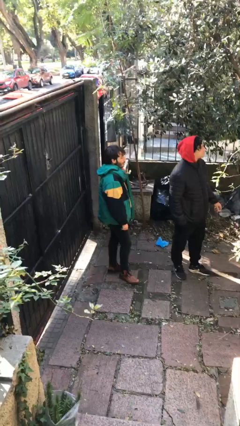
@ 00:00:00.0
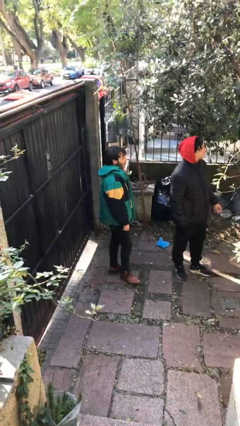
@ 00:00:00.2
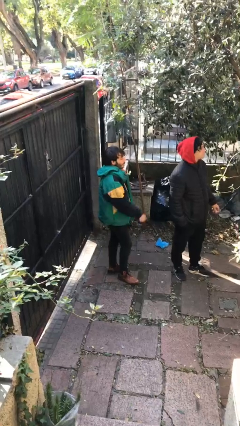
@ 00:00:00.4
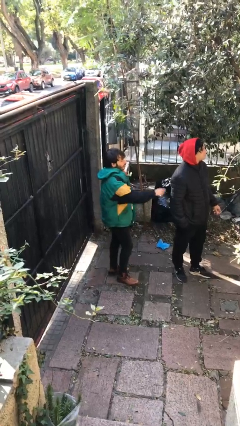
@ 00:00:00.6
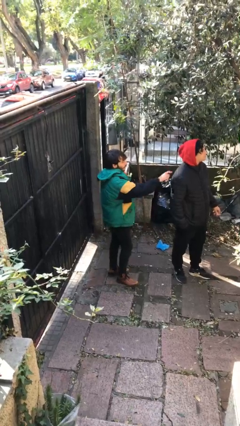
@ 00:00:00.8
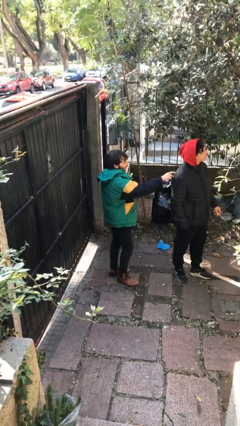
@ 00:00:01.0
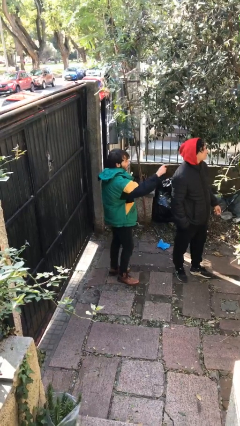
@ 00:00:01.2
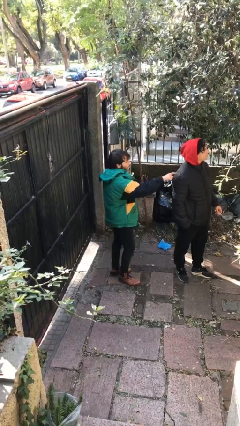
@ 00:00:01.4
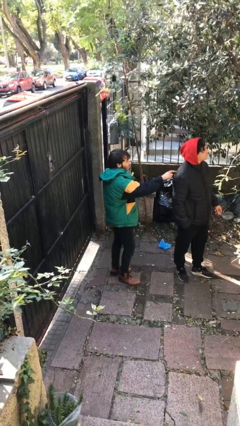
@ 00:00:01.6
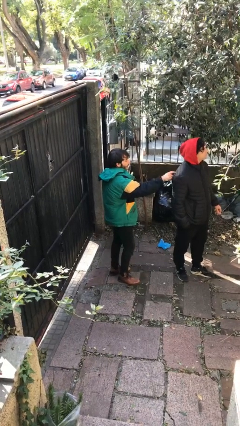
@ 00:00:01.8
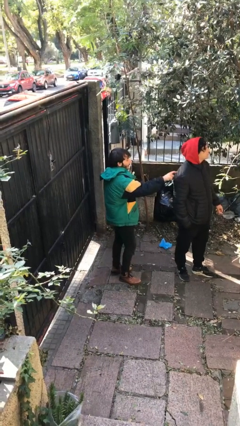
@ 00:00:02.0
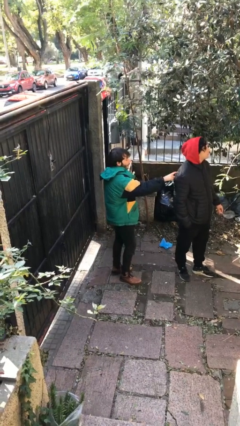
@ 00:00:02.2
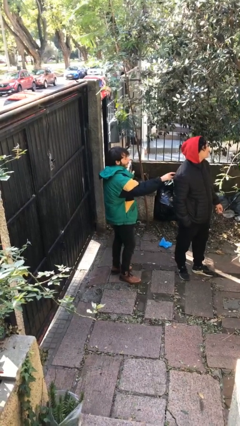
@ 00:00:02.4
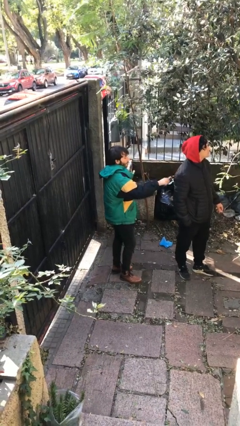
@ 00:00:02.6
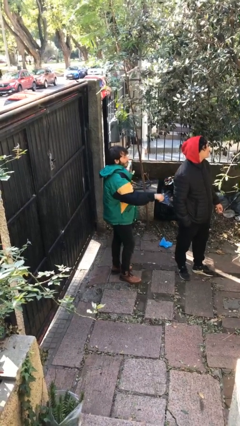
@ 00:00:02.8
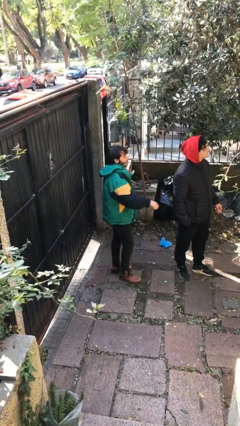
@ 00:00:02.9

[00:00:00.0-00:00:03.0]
person touches back of person

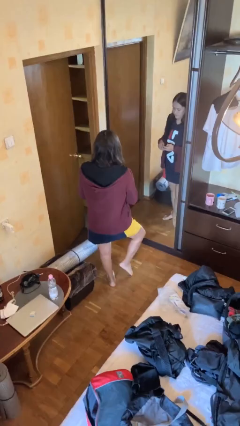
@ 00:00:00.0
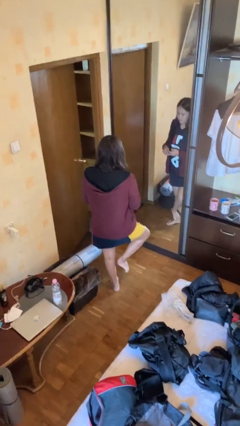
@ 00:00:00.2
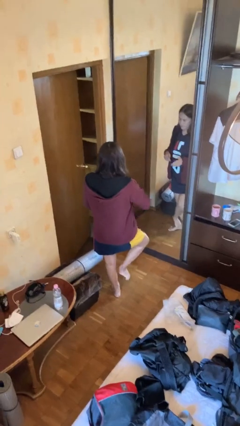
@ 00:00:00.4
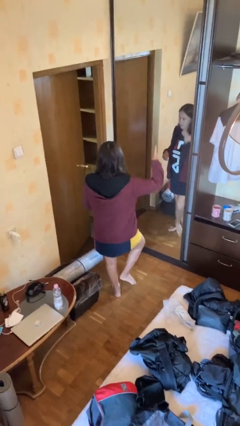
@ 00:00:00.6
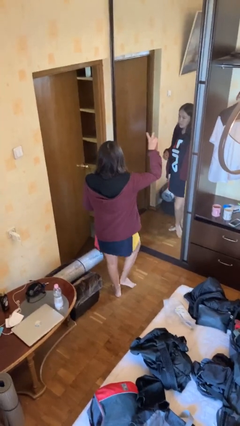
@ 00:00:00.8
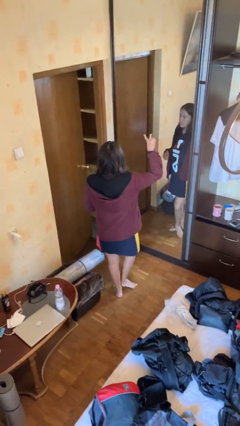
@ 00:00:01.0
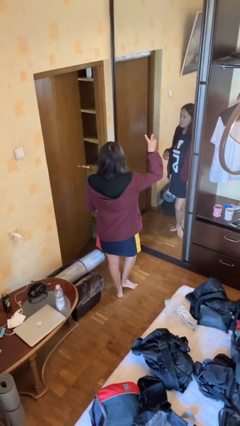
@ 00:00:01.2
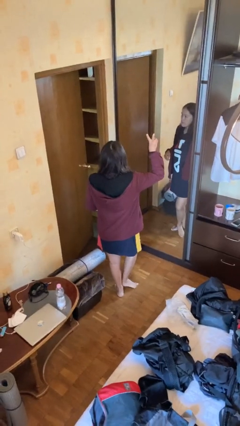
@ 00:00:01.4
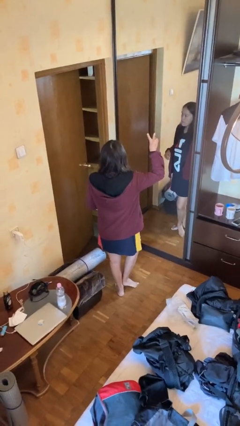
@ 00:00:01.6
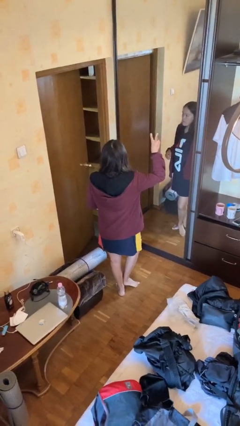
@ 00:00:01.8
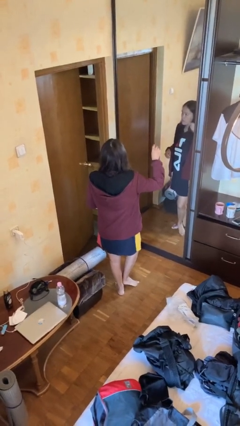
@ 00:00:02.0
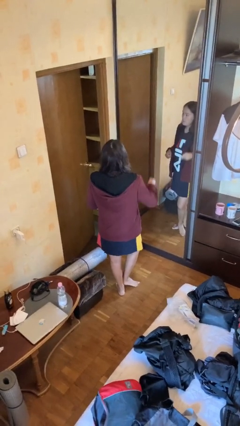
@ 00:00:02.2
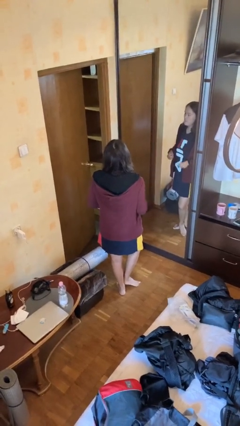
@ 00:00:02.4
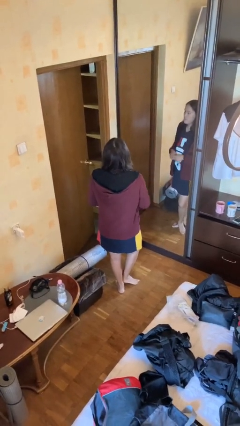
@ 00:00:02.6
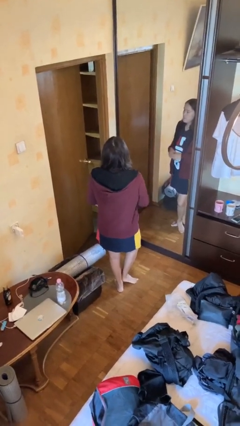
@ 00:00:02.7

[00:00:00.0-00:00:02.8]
person gestures peace

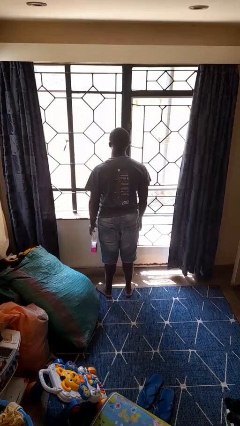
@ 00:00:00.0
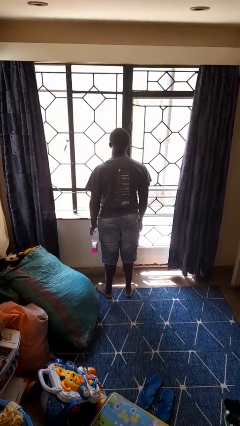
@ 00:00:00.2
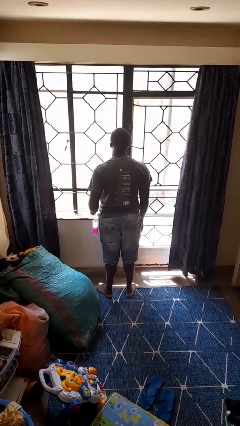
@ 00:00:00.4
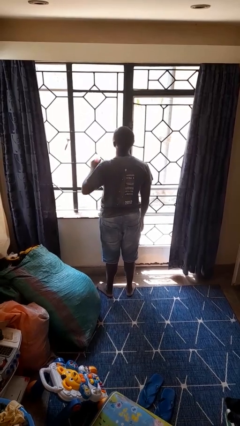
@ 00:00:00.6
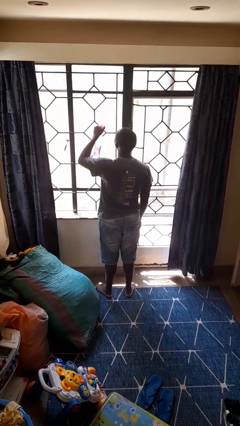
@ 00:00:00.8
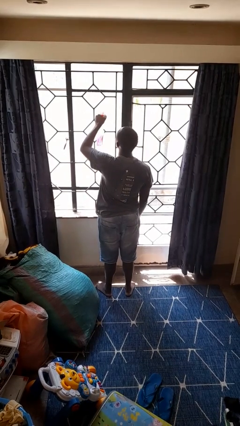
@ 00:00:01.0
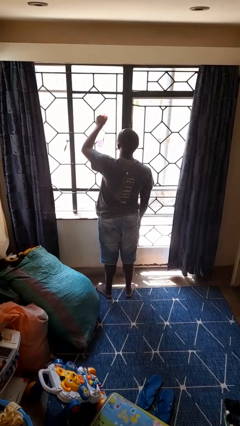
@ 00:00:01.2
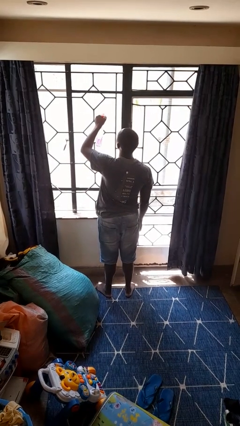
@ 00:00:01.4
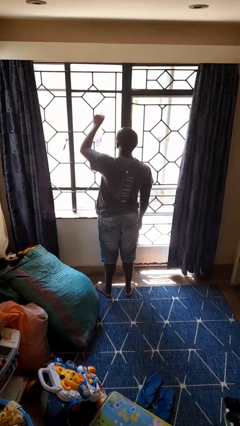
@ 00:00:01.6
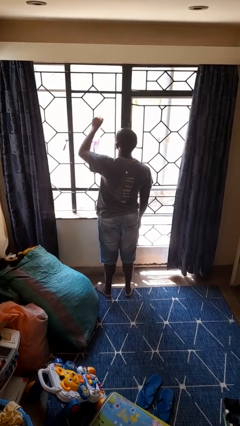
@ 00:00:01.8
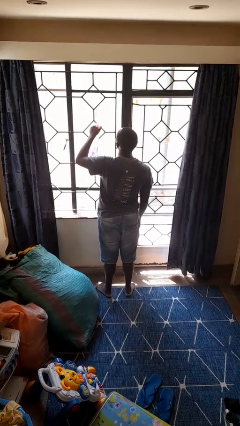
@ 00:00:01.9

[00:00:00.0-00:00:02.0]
person sprays from bottle

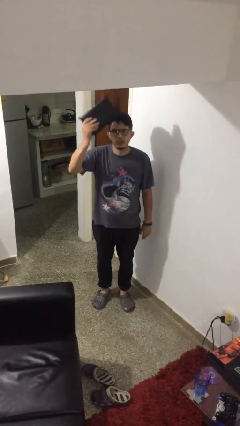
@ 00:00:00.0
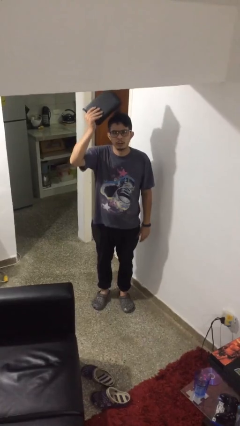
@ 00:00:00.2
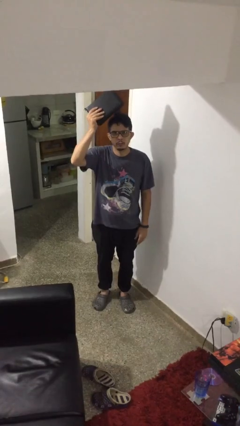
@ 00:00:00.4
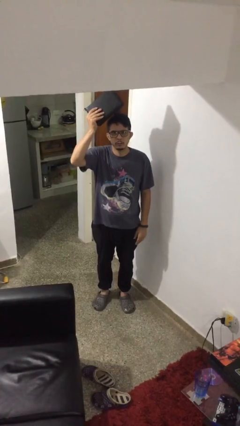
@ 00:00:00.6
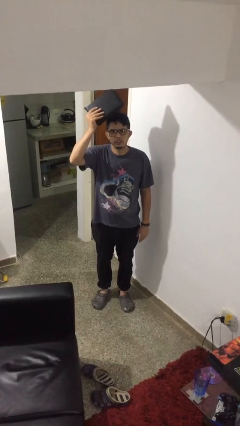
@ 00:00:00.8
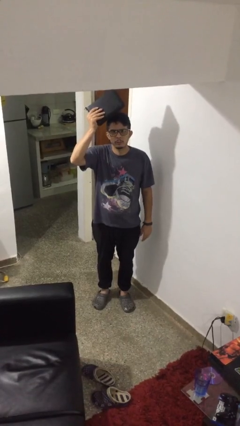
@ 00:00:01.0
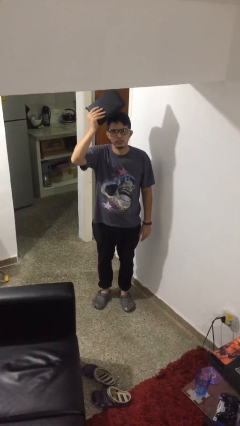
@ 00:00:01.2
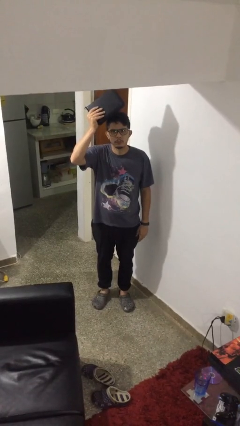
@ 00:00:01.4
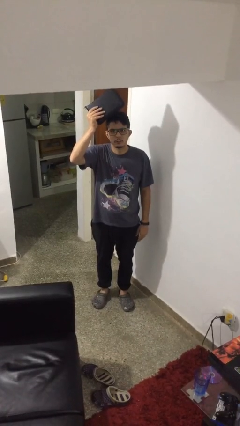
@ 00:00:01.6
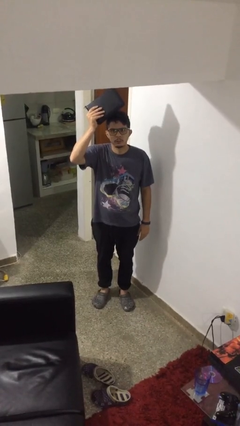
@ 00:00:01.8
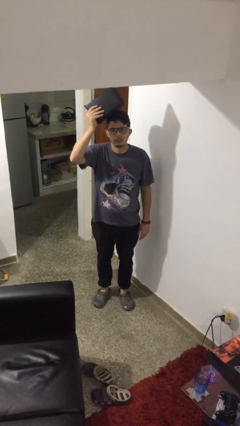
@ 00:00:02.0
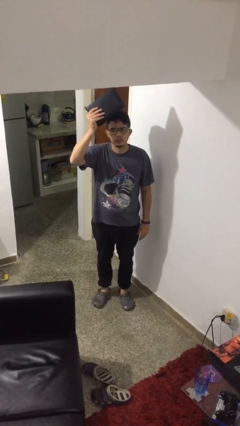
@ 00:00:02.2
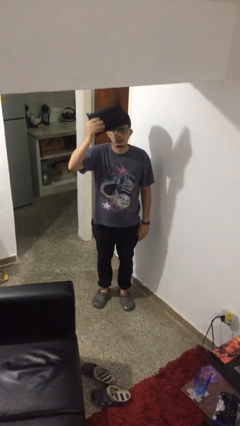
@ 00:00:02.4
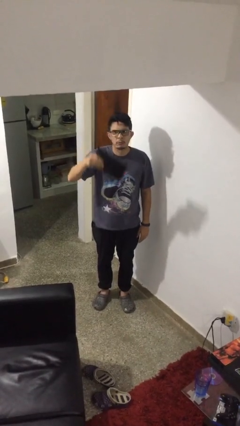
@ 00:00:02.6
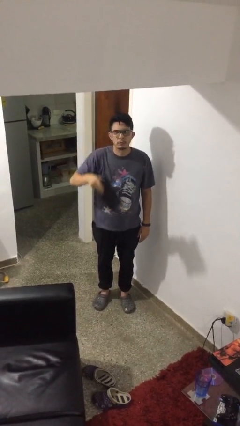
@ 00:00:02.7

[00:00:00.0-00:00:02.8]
person holds object above head

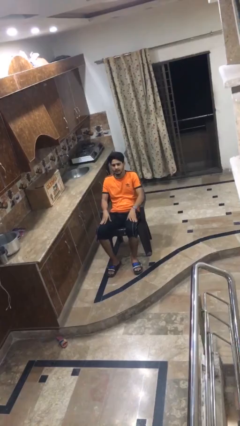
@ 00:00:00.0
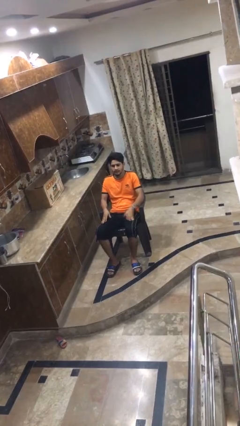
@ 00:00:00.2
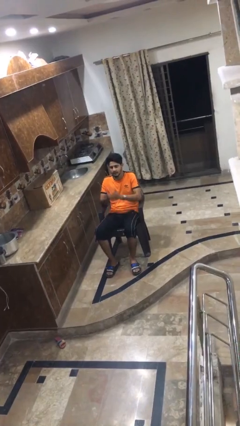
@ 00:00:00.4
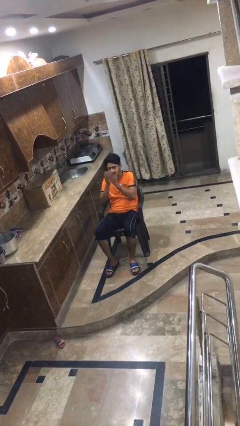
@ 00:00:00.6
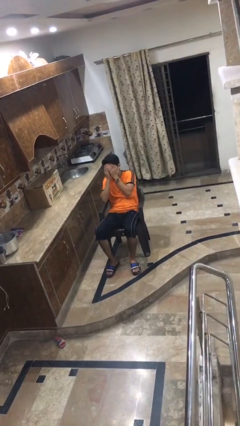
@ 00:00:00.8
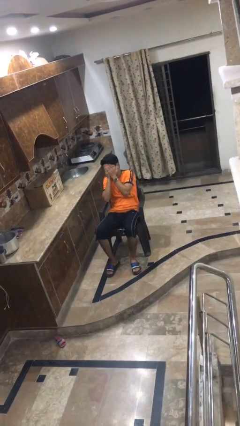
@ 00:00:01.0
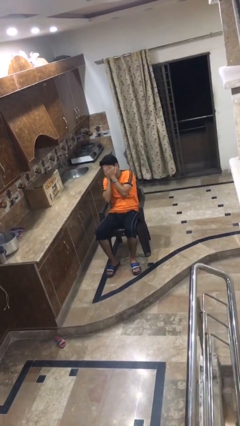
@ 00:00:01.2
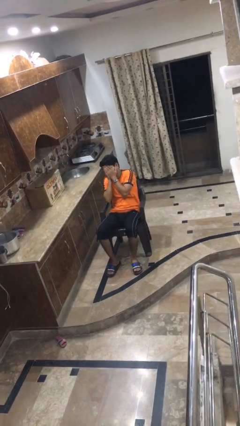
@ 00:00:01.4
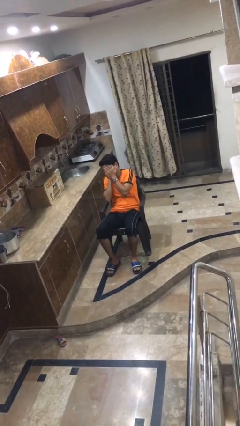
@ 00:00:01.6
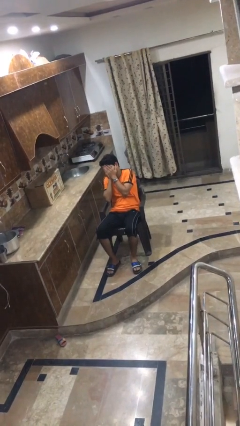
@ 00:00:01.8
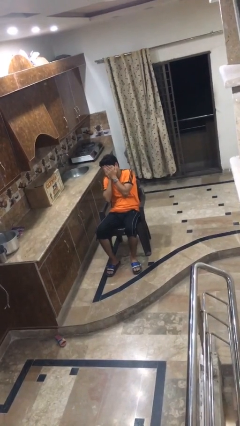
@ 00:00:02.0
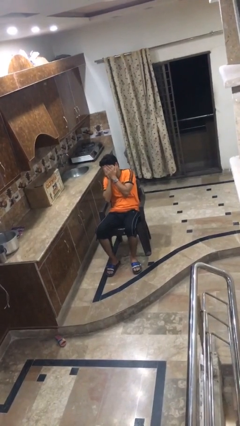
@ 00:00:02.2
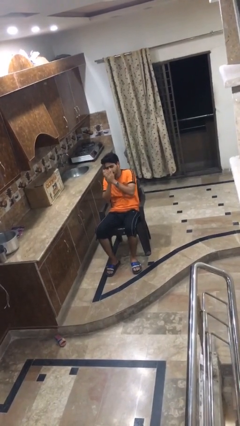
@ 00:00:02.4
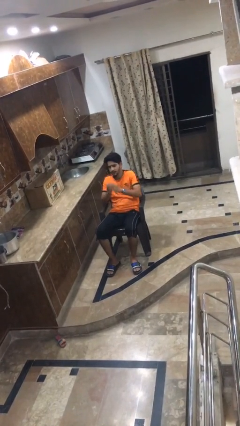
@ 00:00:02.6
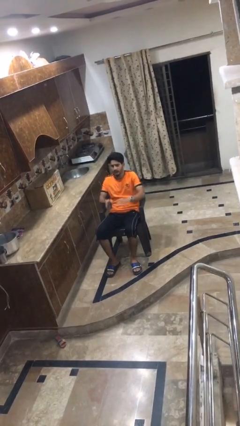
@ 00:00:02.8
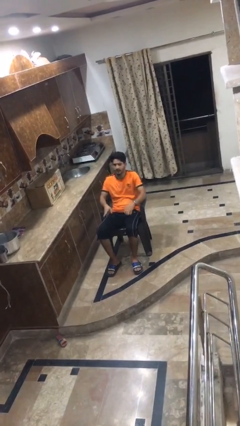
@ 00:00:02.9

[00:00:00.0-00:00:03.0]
person covers face with hands

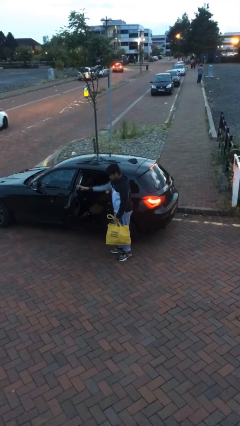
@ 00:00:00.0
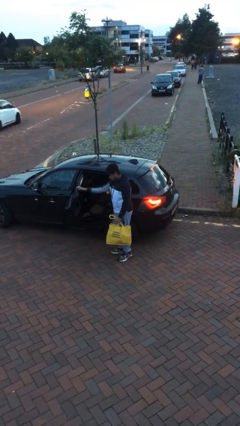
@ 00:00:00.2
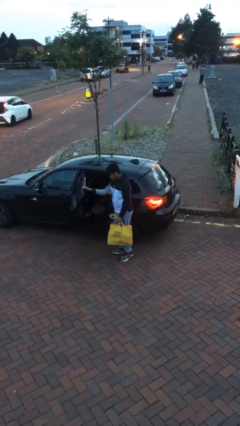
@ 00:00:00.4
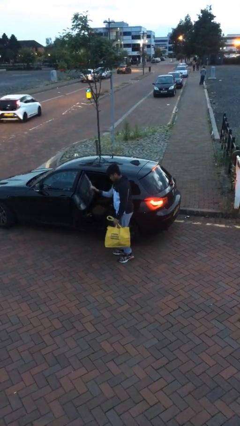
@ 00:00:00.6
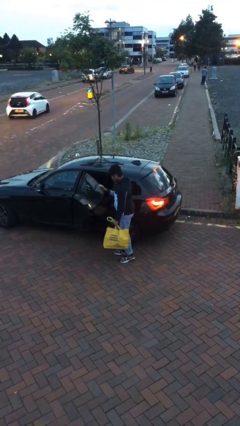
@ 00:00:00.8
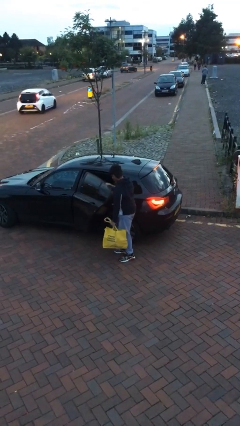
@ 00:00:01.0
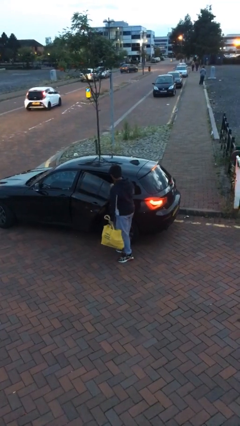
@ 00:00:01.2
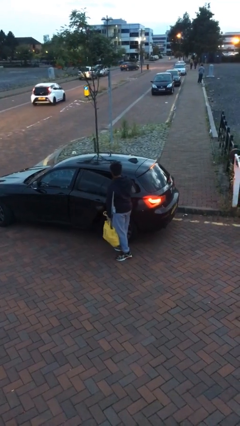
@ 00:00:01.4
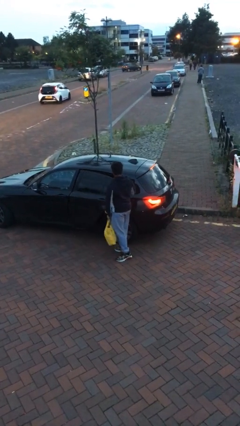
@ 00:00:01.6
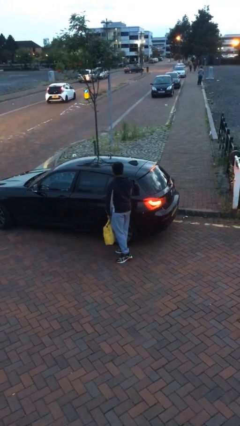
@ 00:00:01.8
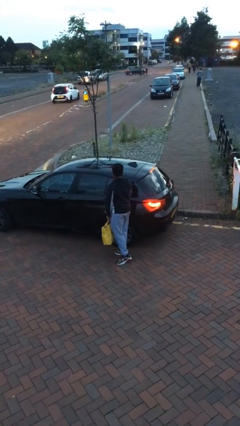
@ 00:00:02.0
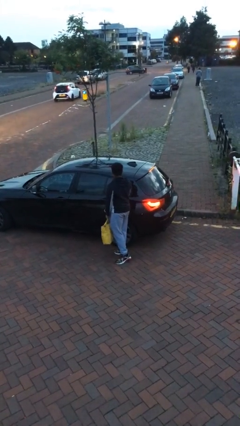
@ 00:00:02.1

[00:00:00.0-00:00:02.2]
person closes car door

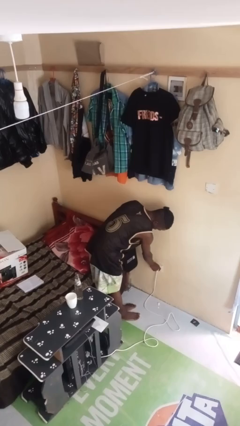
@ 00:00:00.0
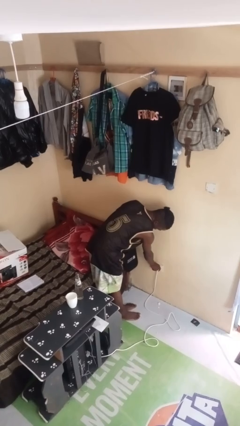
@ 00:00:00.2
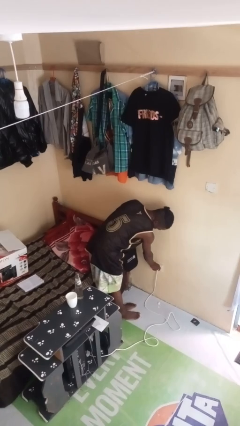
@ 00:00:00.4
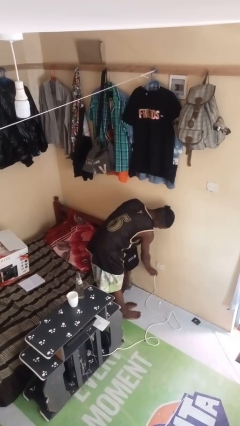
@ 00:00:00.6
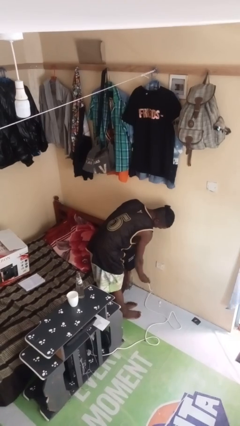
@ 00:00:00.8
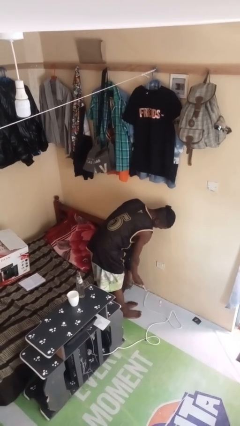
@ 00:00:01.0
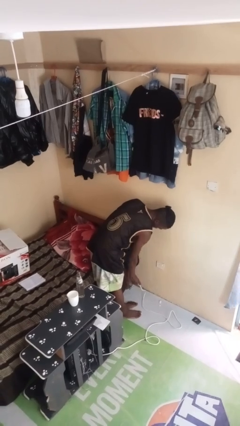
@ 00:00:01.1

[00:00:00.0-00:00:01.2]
person unplugs from electrical socket
